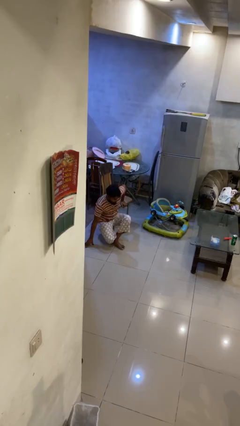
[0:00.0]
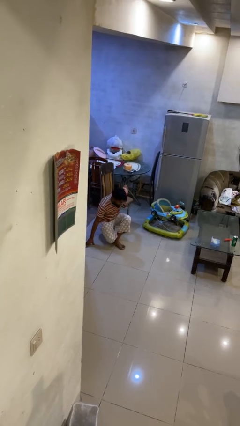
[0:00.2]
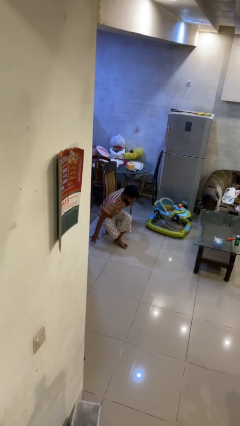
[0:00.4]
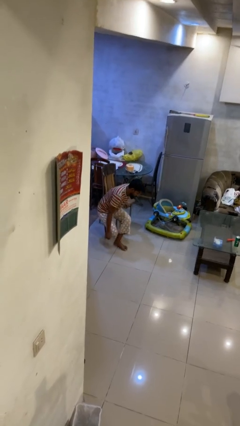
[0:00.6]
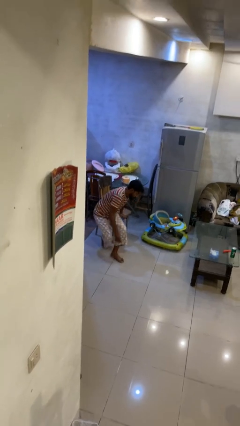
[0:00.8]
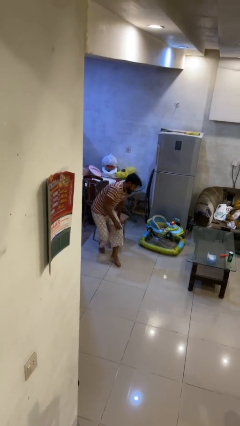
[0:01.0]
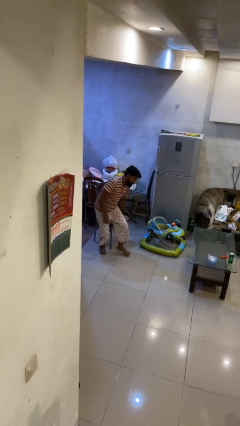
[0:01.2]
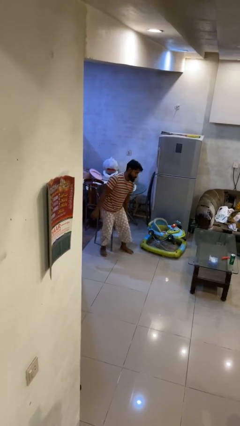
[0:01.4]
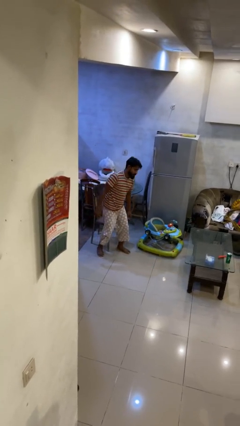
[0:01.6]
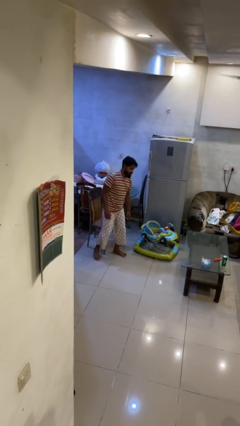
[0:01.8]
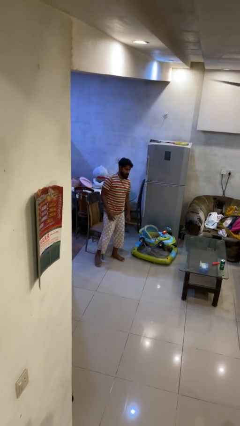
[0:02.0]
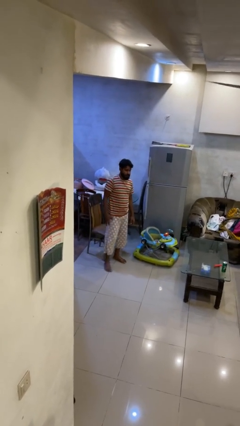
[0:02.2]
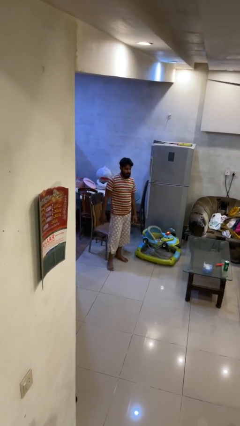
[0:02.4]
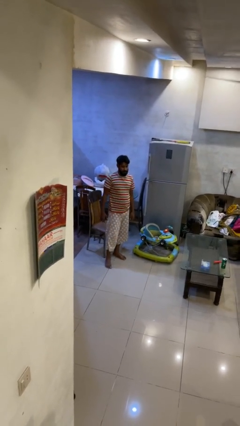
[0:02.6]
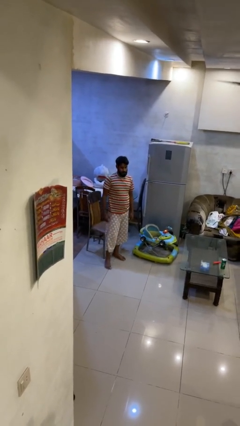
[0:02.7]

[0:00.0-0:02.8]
person stands up from floor

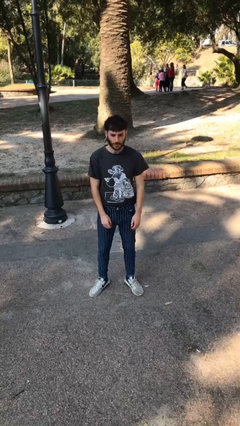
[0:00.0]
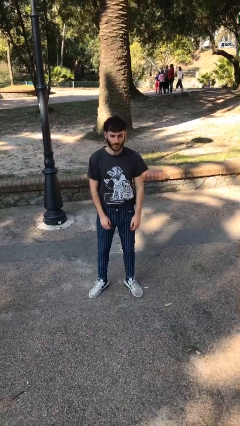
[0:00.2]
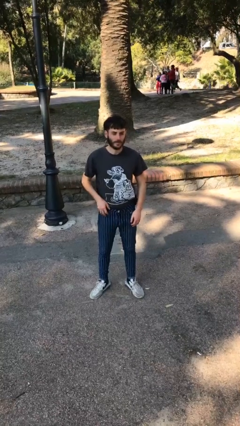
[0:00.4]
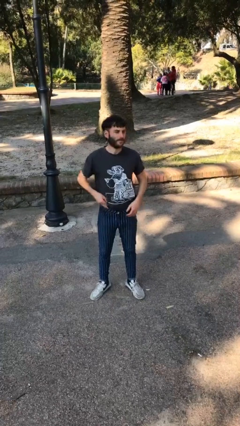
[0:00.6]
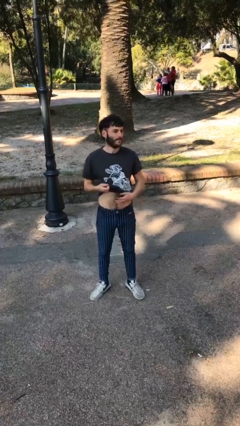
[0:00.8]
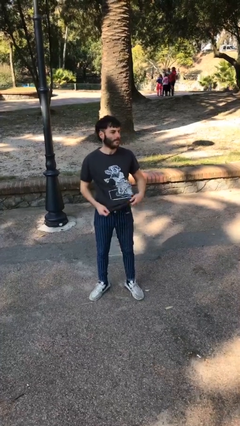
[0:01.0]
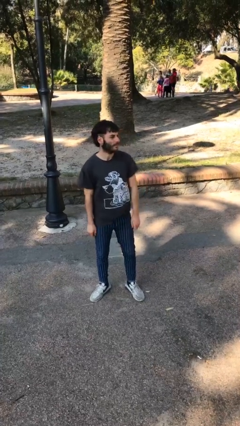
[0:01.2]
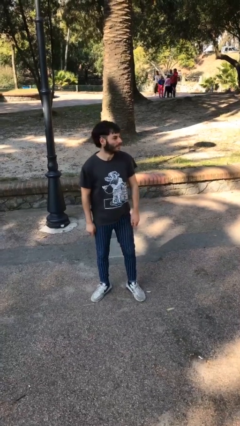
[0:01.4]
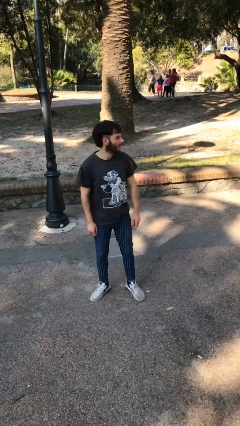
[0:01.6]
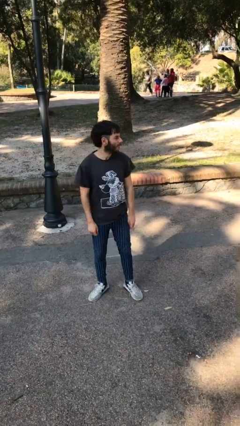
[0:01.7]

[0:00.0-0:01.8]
person untucks shirt

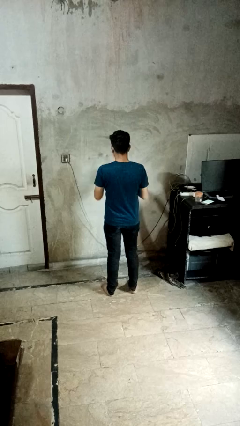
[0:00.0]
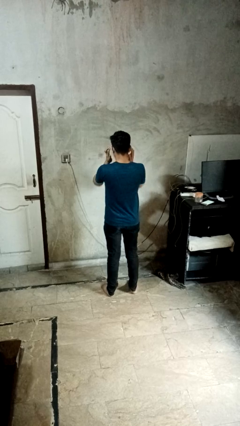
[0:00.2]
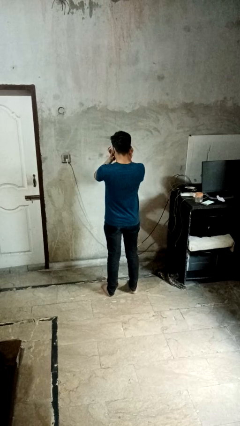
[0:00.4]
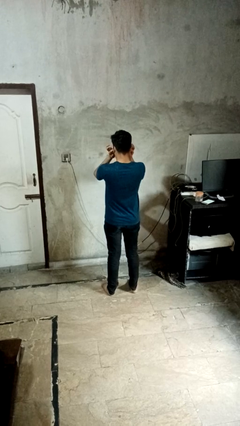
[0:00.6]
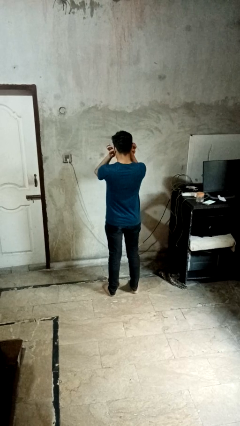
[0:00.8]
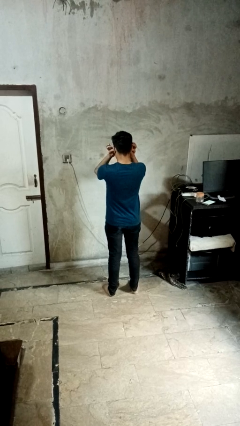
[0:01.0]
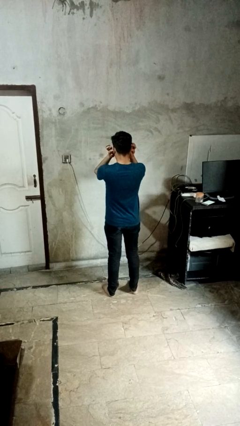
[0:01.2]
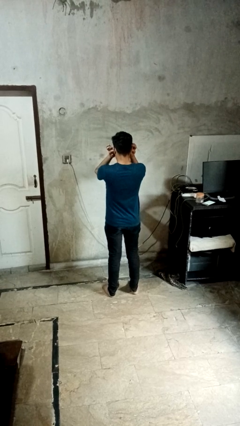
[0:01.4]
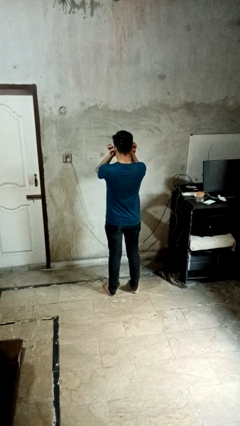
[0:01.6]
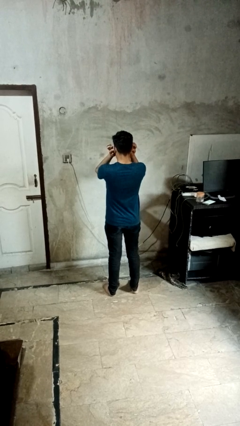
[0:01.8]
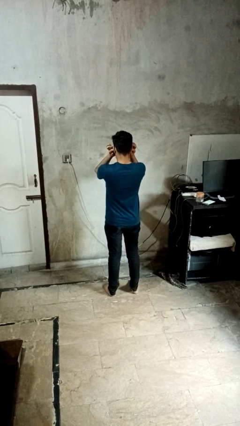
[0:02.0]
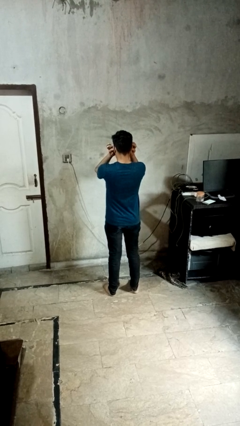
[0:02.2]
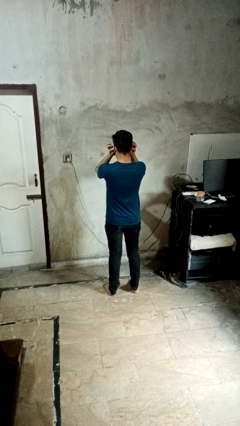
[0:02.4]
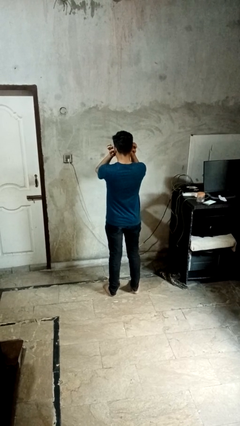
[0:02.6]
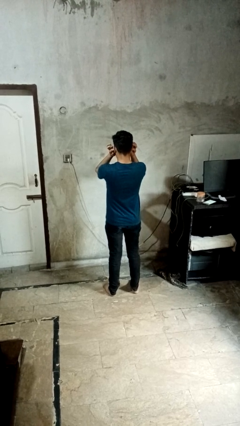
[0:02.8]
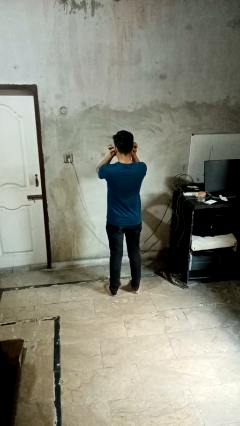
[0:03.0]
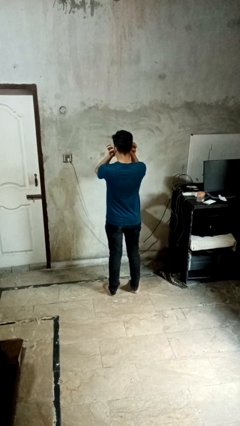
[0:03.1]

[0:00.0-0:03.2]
person puts fingers in ear

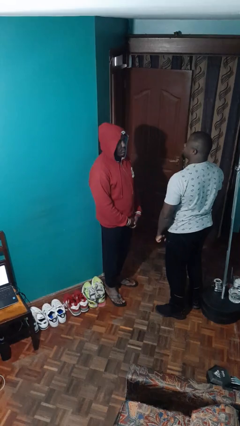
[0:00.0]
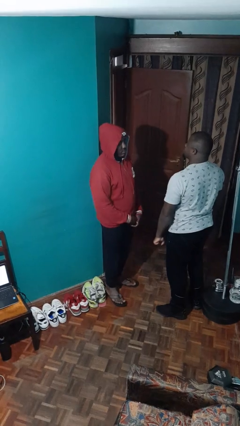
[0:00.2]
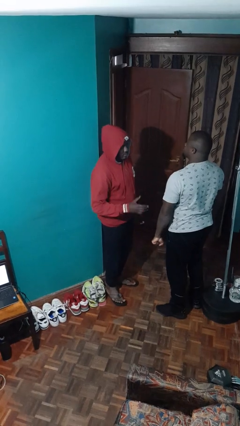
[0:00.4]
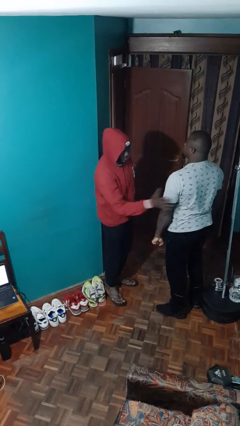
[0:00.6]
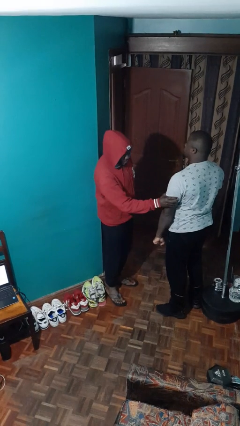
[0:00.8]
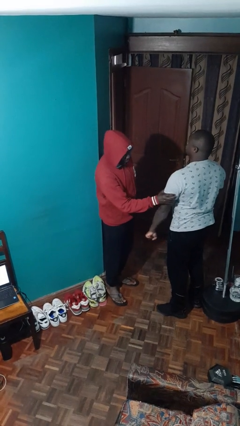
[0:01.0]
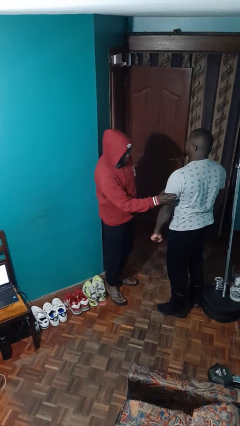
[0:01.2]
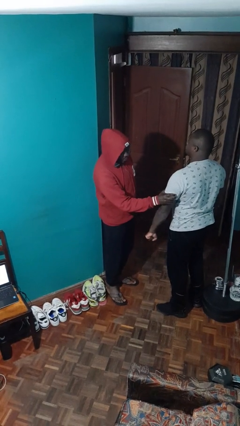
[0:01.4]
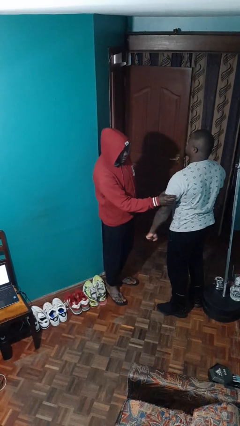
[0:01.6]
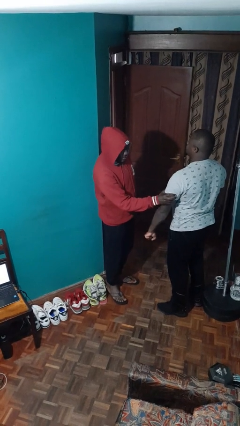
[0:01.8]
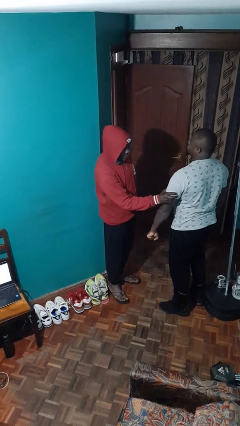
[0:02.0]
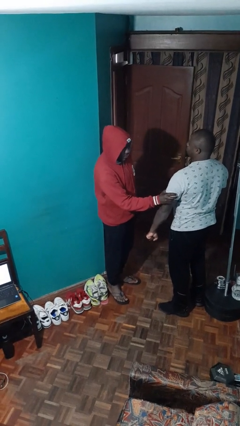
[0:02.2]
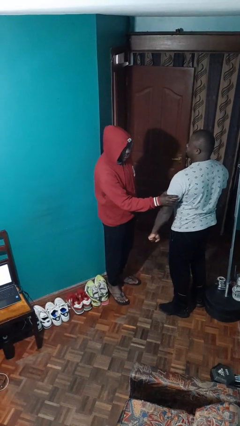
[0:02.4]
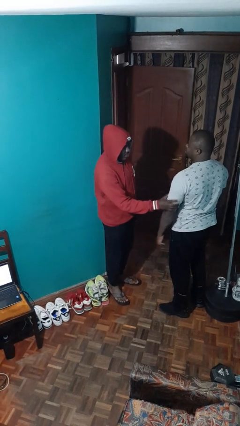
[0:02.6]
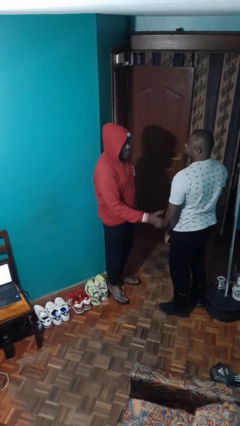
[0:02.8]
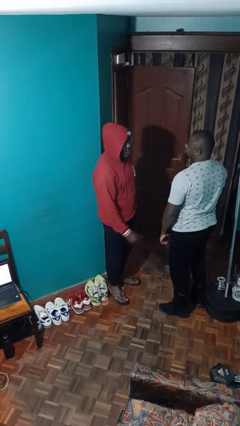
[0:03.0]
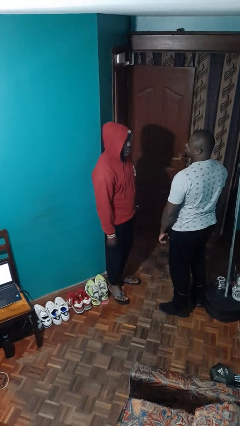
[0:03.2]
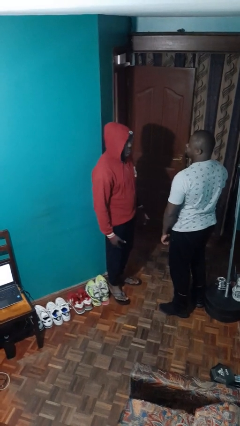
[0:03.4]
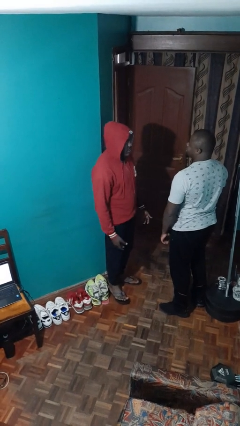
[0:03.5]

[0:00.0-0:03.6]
person grabs person by bicep

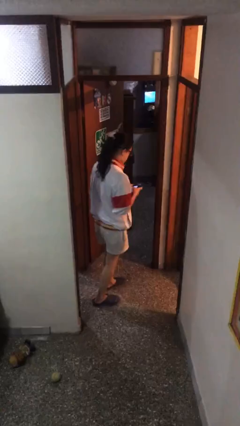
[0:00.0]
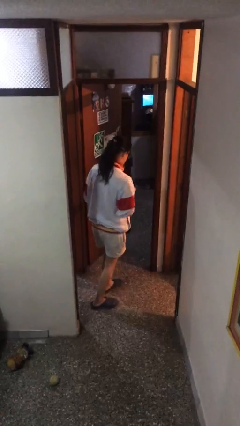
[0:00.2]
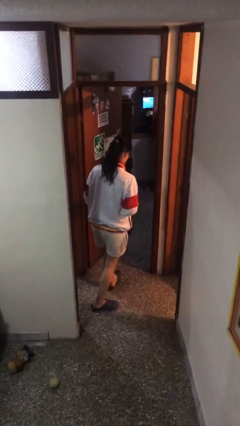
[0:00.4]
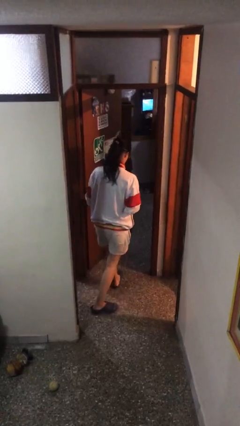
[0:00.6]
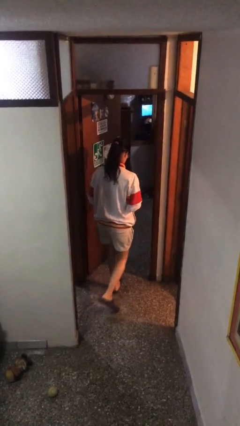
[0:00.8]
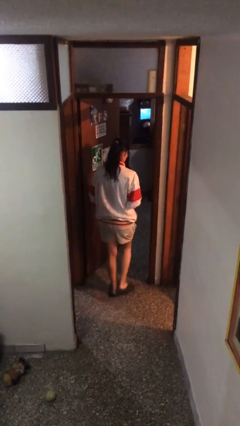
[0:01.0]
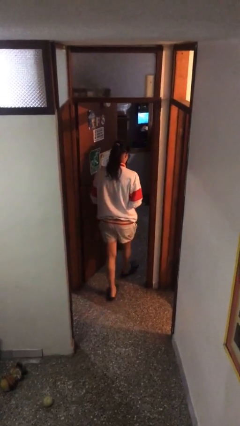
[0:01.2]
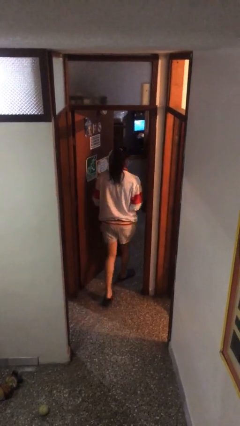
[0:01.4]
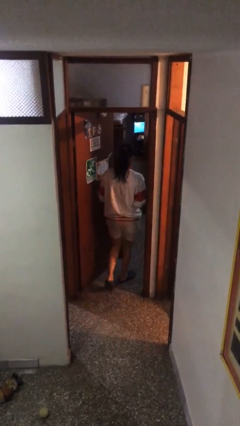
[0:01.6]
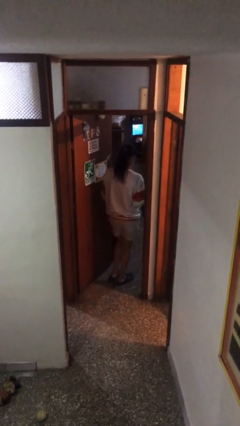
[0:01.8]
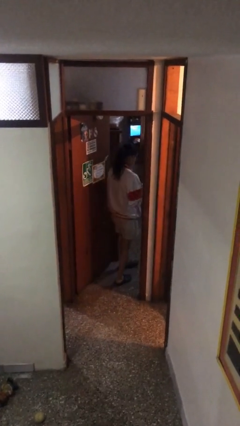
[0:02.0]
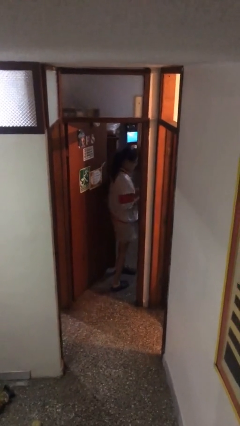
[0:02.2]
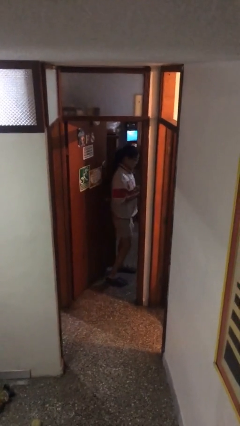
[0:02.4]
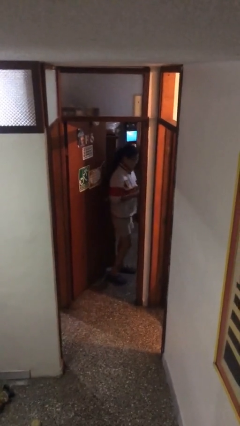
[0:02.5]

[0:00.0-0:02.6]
person exits scene through structure

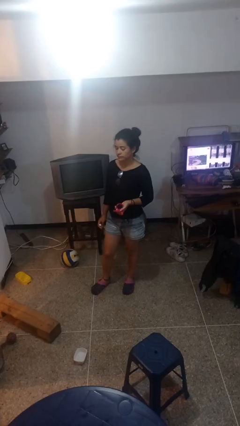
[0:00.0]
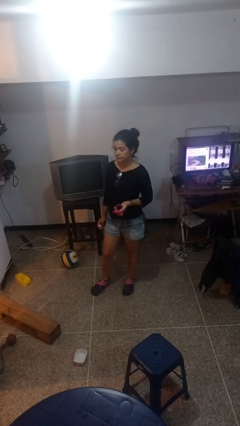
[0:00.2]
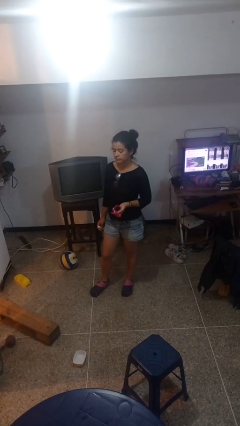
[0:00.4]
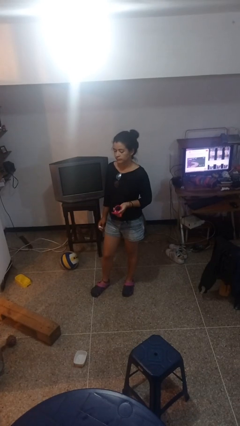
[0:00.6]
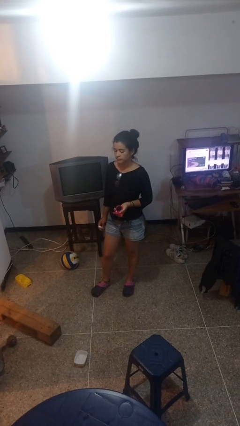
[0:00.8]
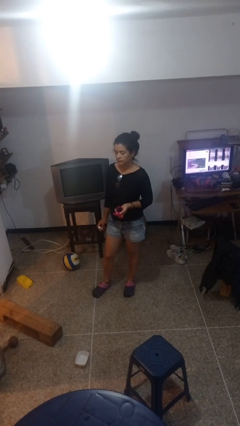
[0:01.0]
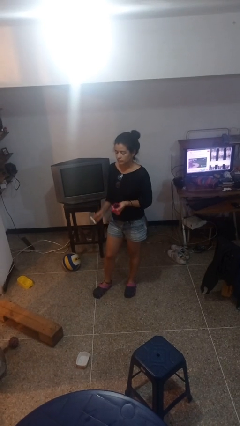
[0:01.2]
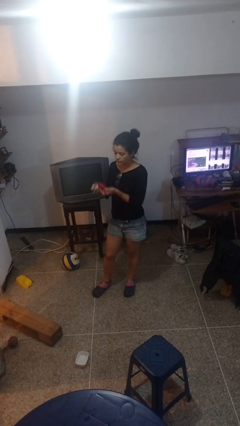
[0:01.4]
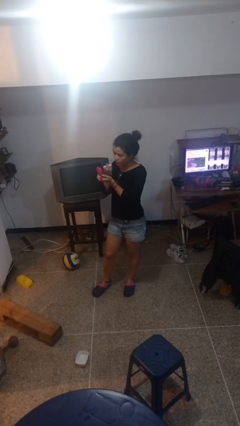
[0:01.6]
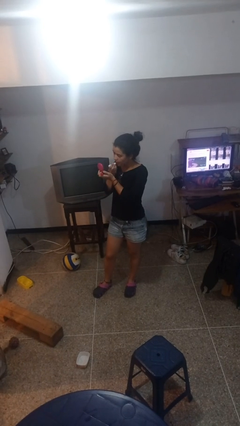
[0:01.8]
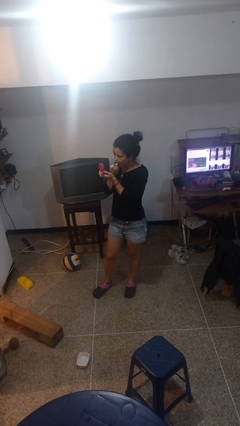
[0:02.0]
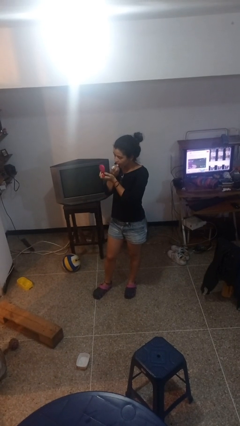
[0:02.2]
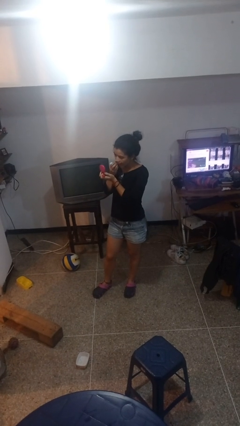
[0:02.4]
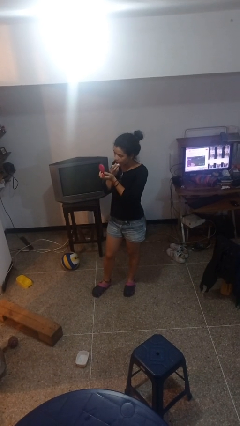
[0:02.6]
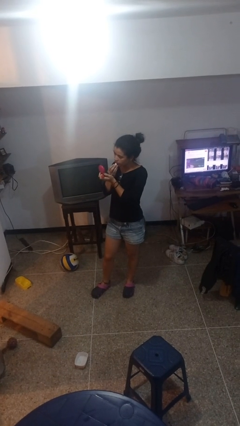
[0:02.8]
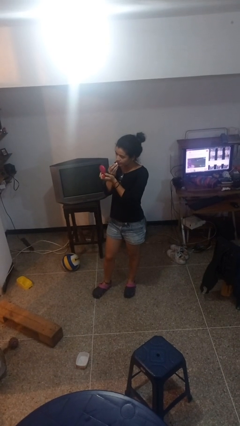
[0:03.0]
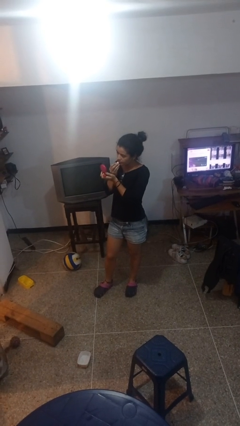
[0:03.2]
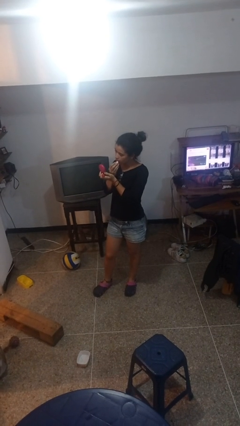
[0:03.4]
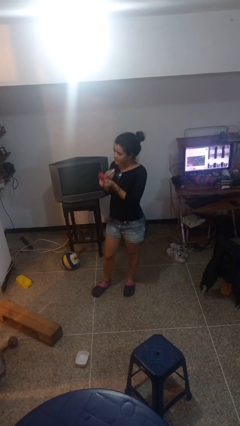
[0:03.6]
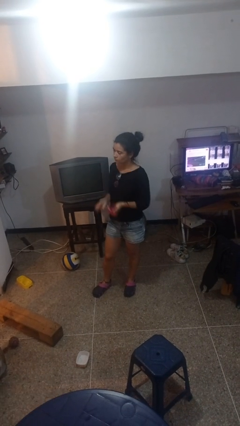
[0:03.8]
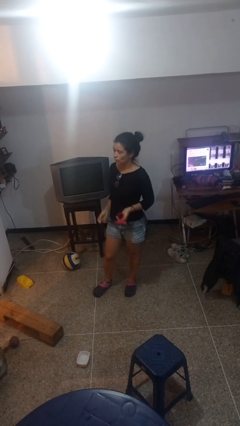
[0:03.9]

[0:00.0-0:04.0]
person applies lip makeup
